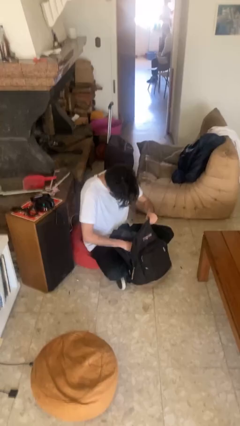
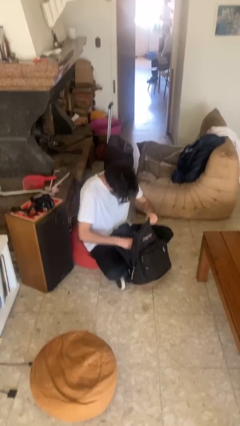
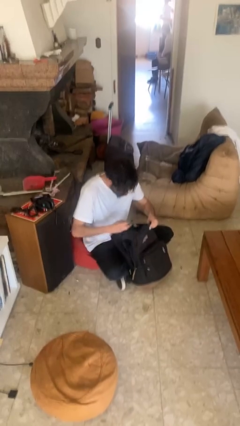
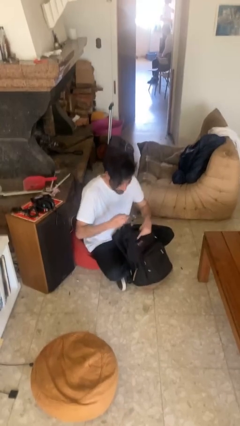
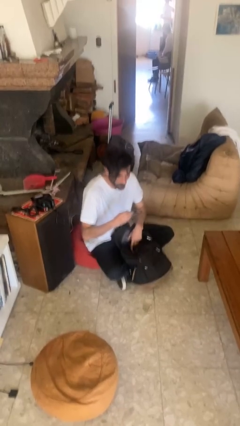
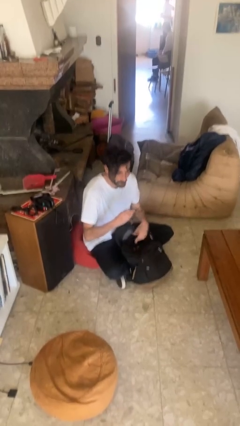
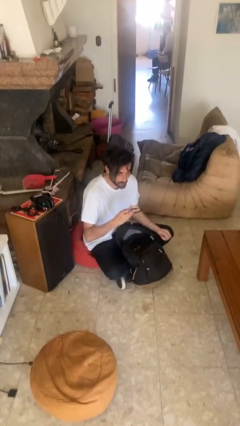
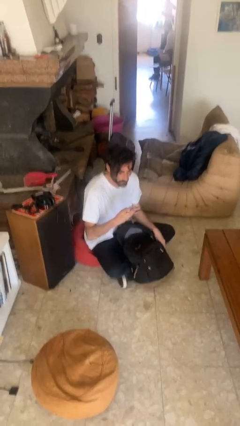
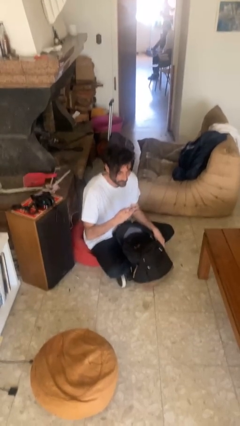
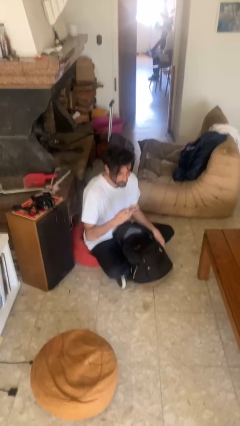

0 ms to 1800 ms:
person takes object from backpack

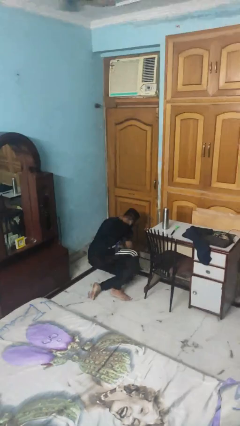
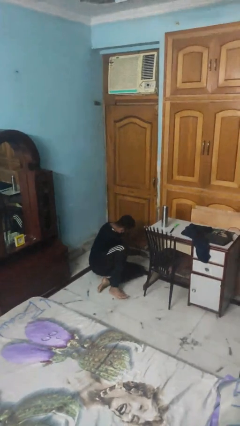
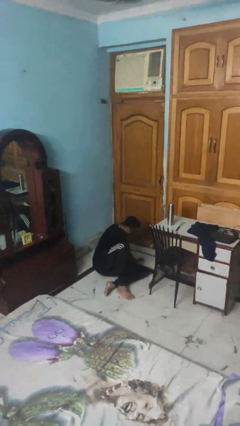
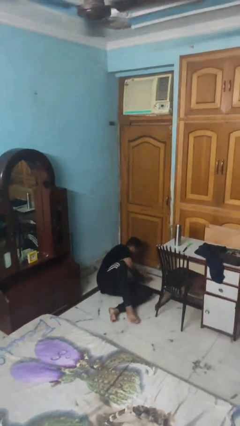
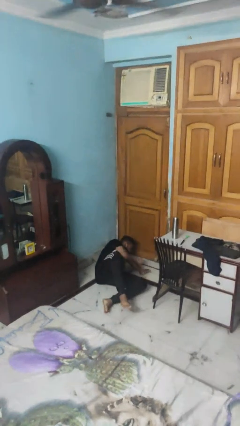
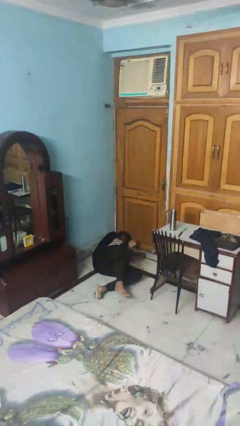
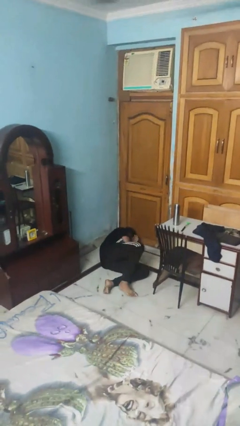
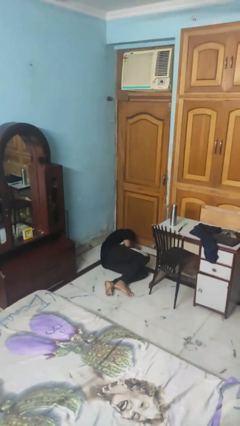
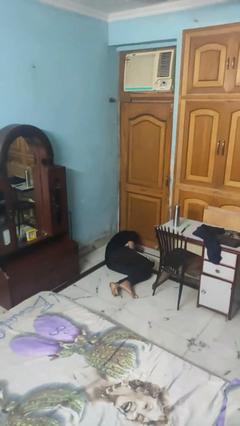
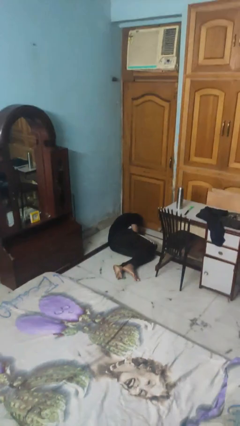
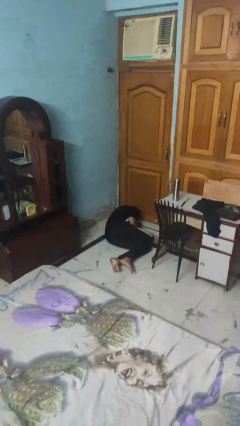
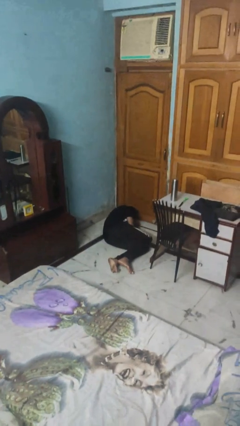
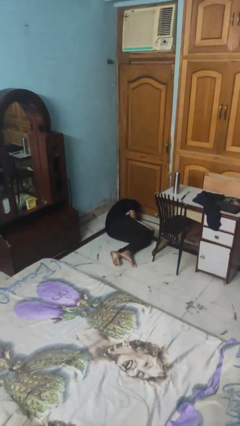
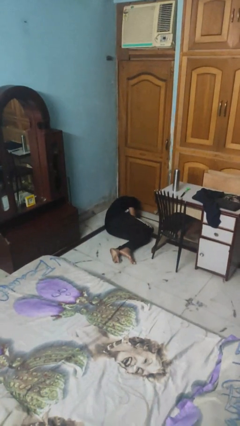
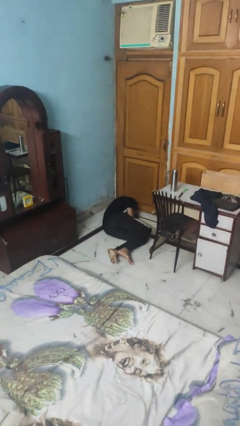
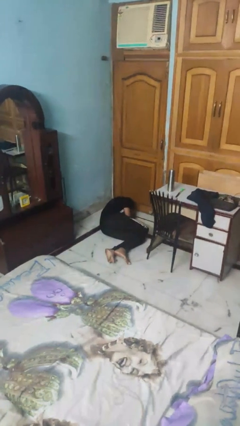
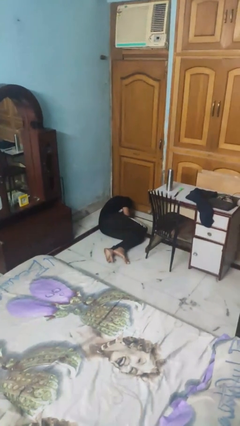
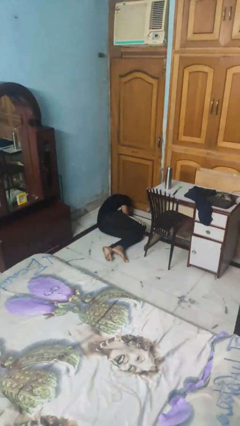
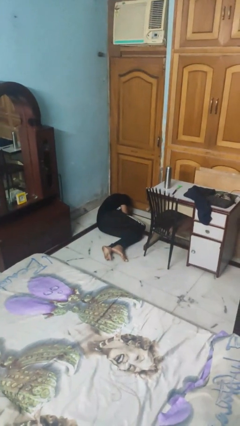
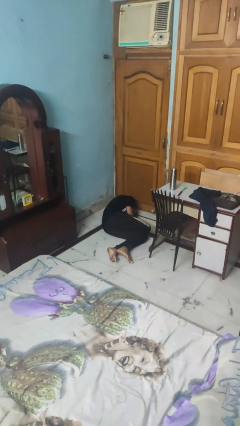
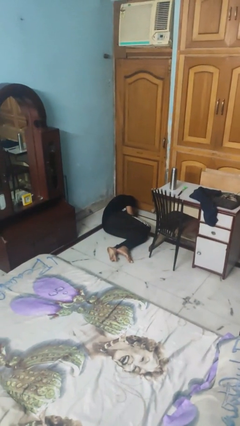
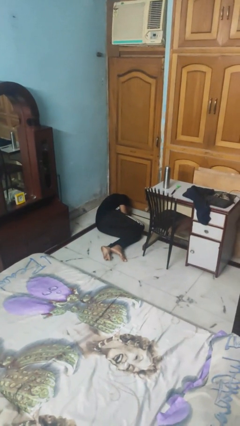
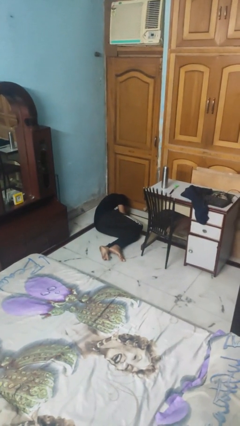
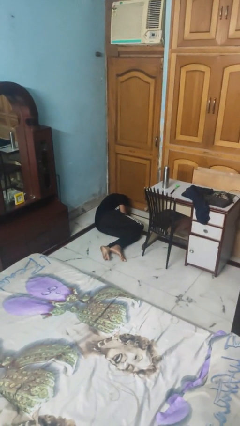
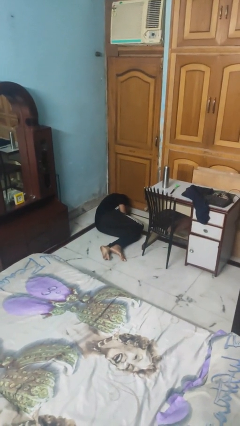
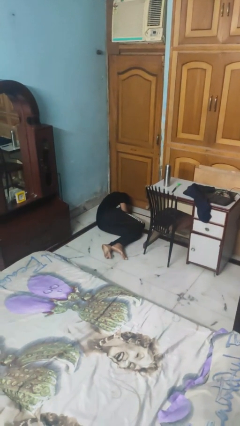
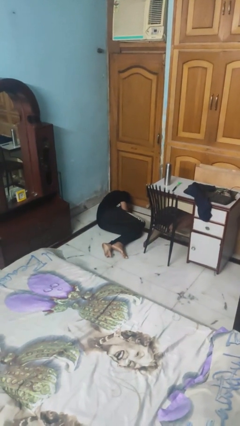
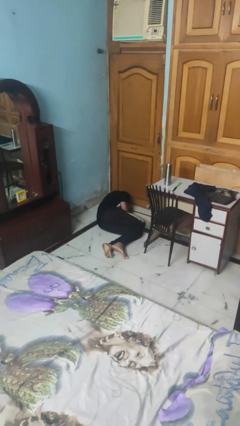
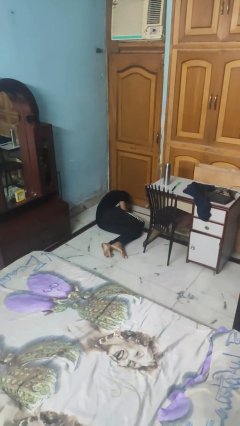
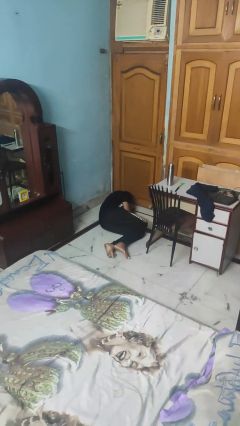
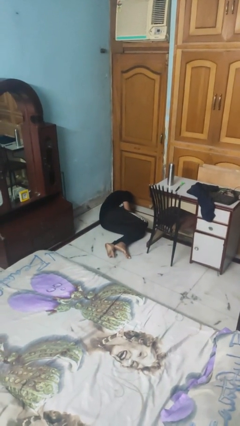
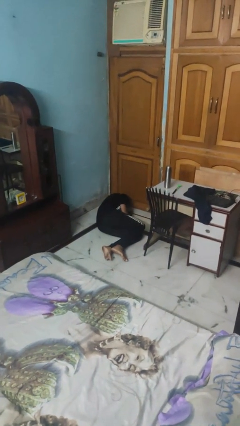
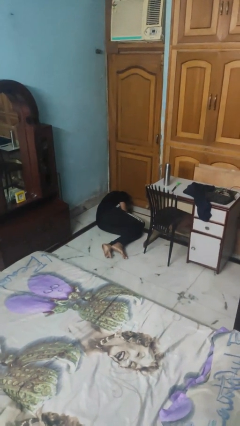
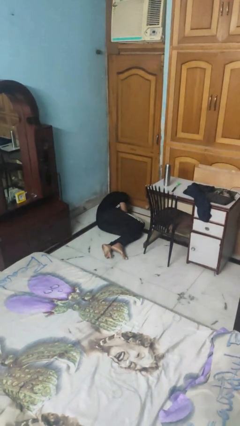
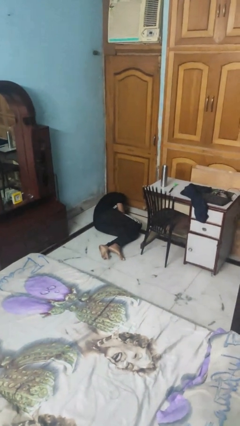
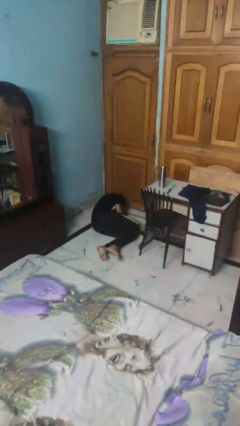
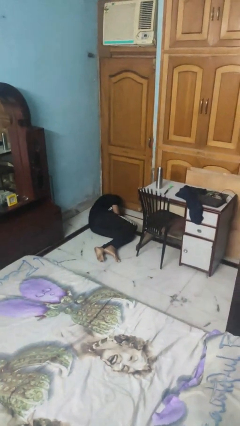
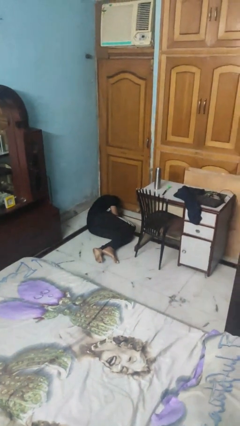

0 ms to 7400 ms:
person lies down on floor

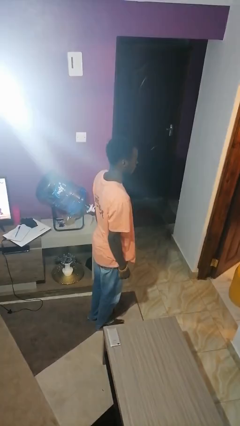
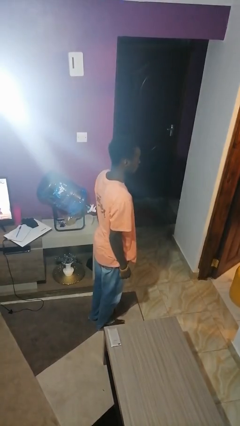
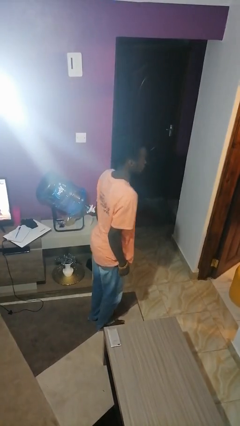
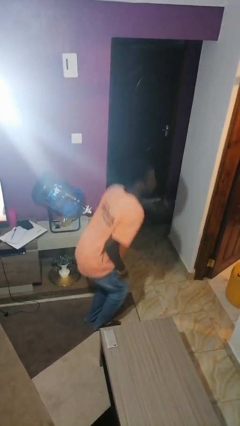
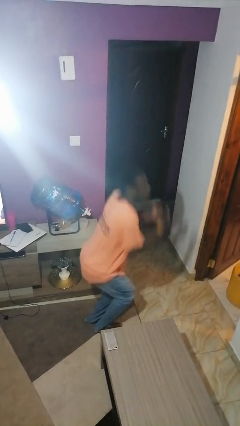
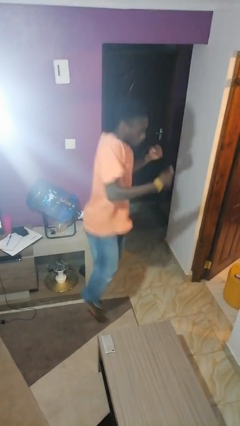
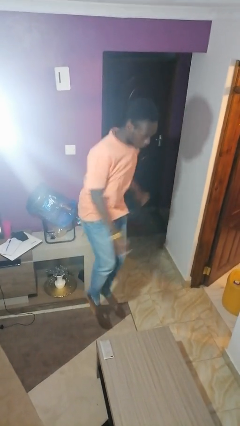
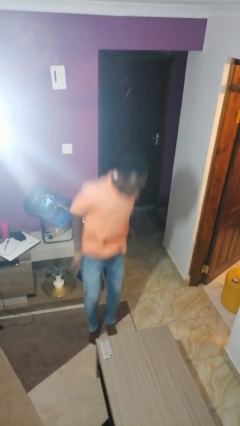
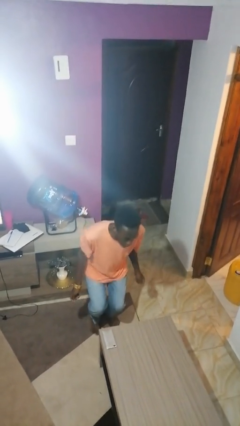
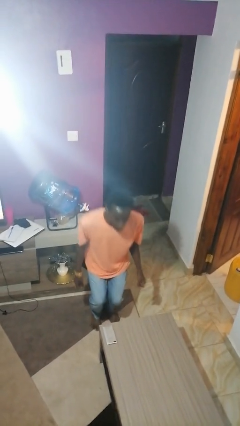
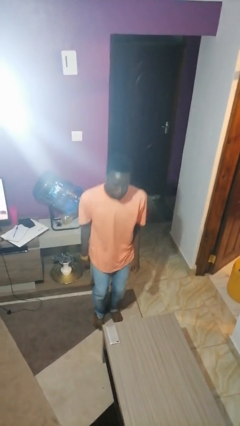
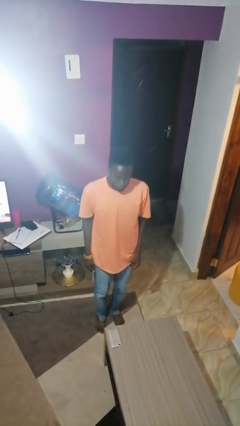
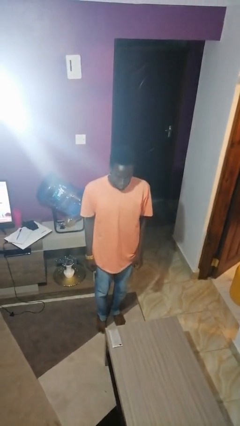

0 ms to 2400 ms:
person jumps

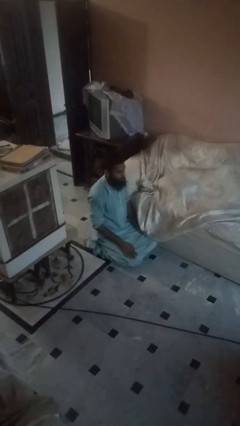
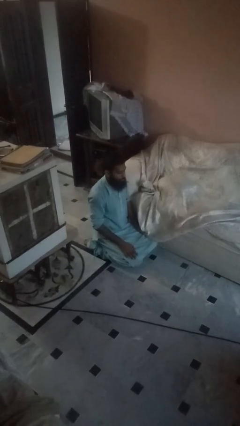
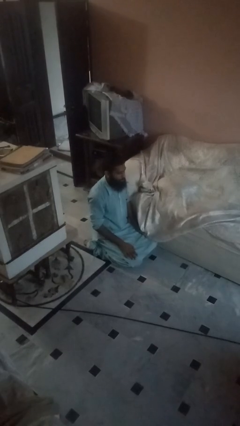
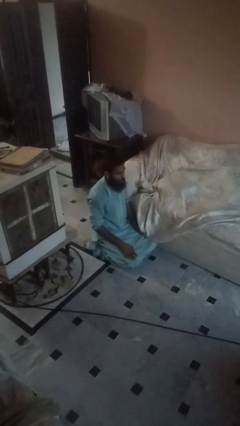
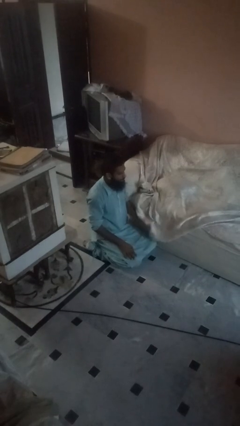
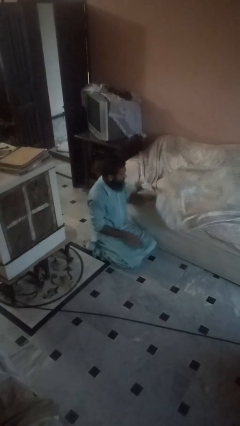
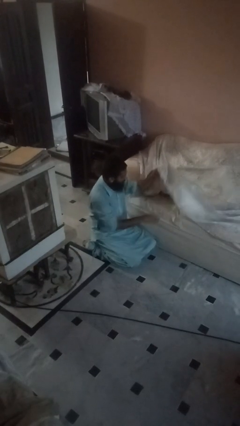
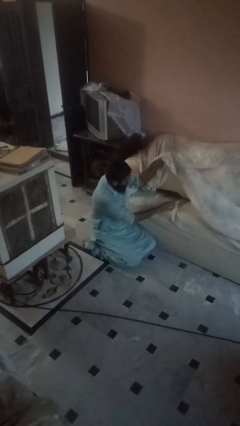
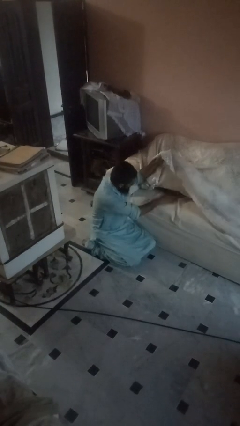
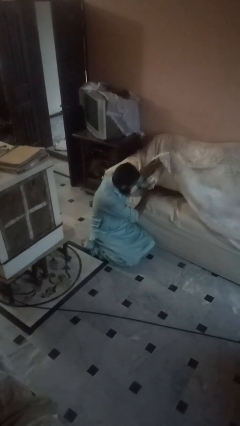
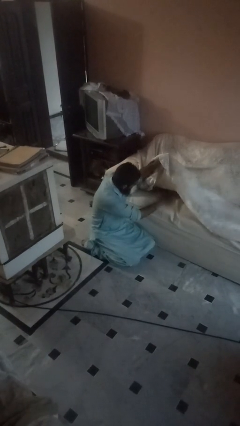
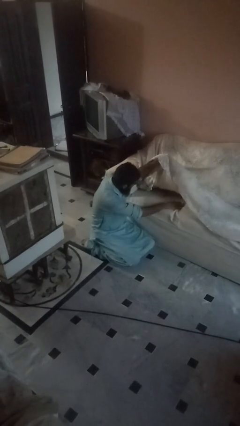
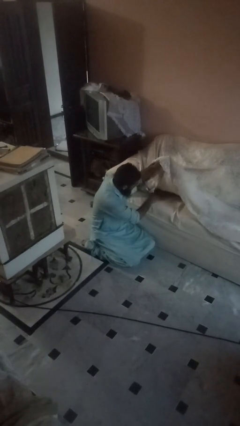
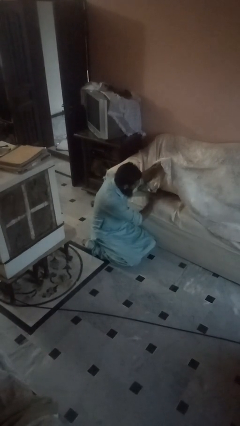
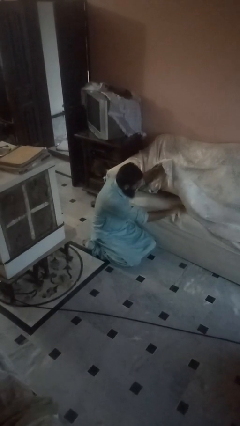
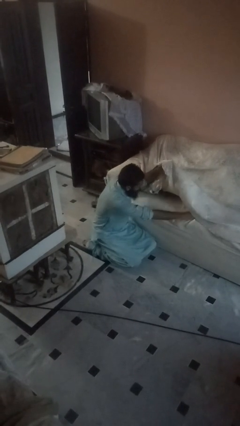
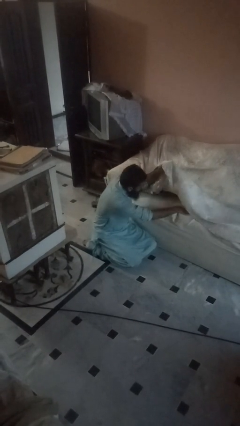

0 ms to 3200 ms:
person searches in couch

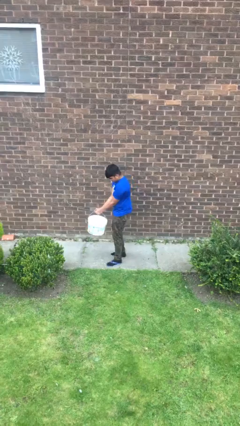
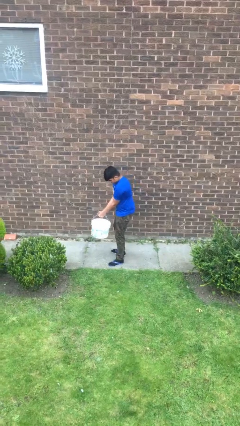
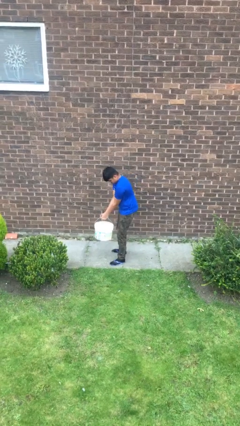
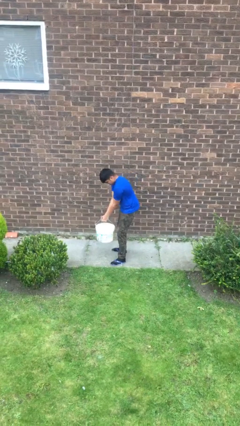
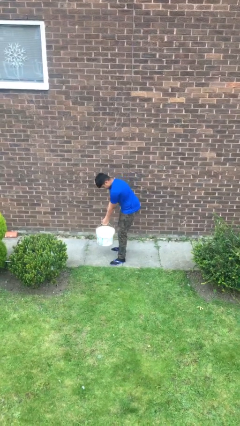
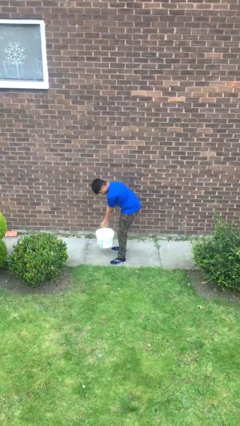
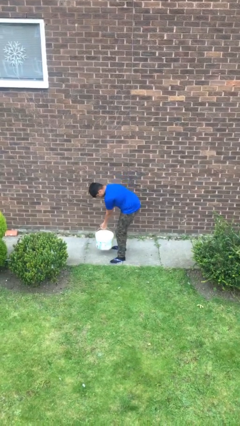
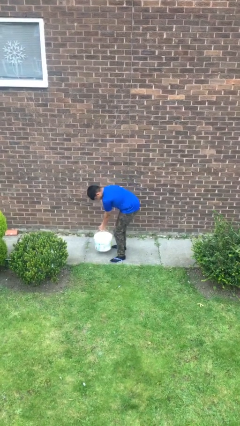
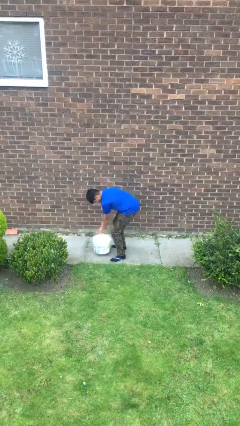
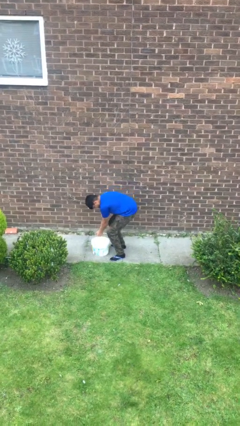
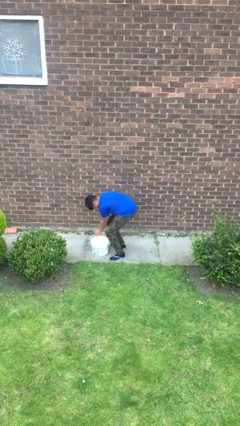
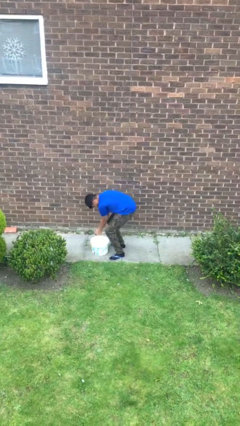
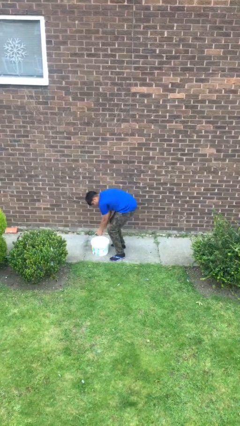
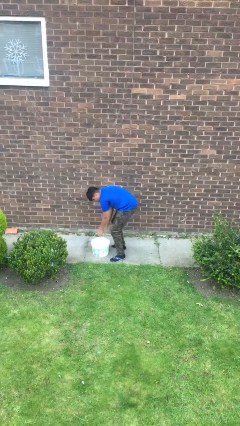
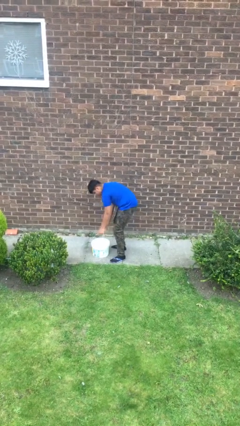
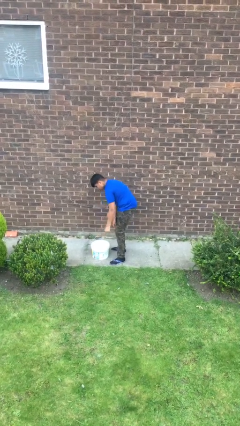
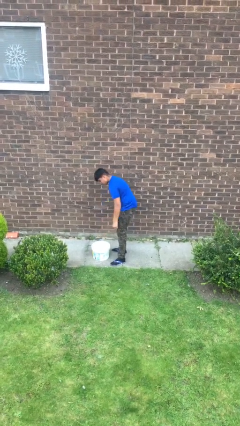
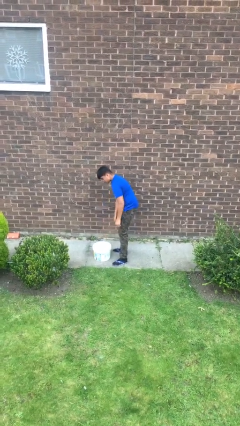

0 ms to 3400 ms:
person puts down object on floor
